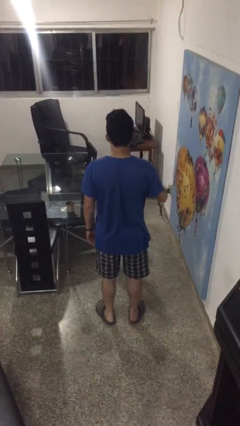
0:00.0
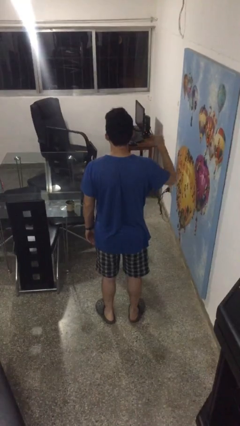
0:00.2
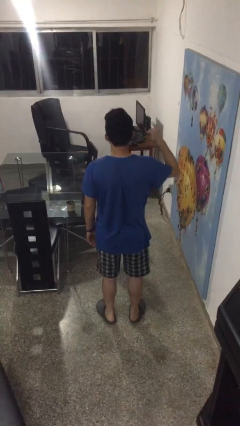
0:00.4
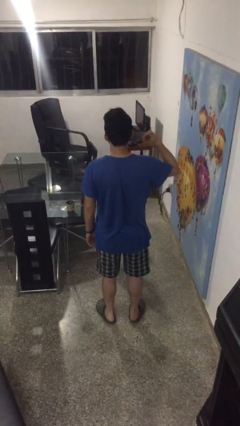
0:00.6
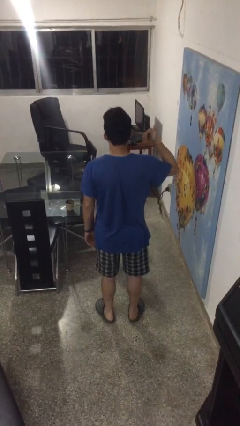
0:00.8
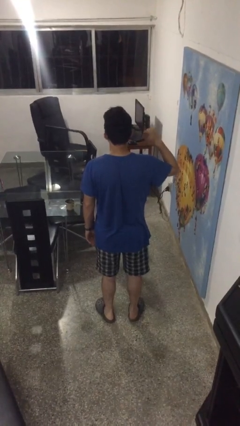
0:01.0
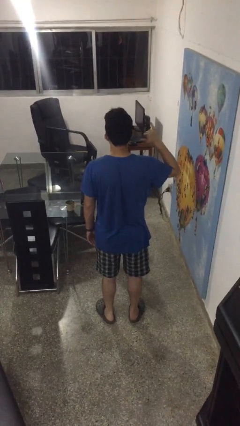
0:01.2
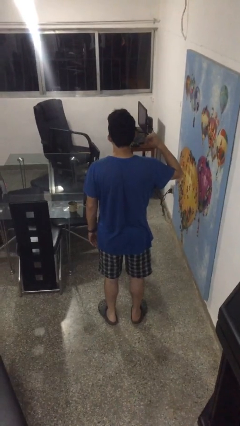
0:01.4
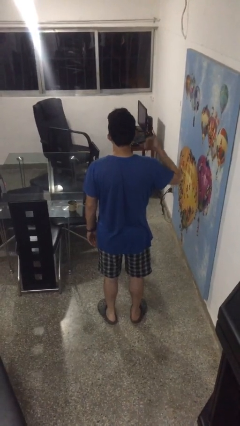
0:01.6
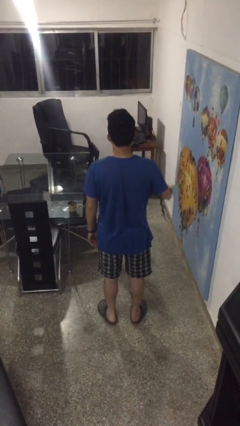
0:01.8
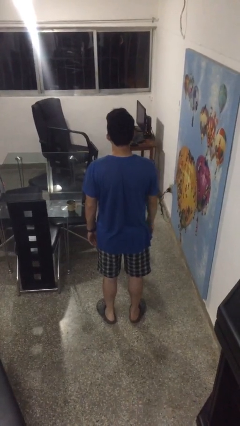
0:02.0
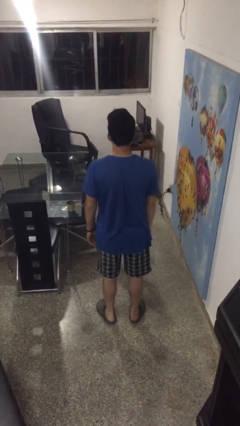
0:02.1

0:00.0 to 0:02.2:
person gestures hang loose

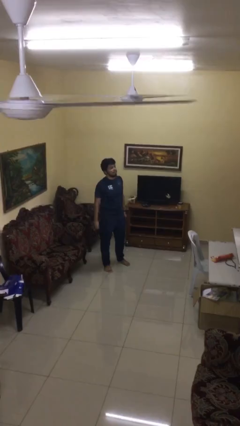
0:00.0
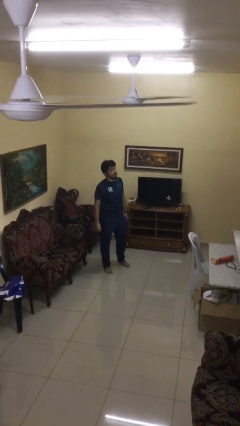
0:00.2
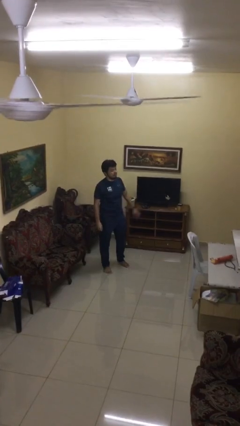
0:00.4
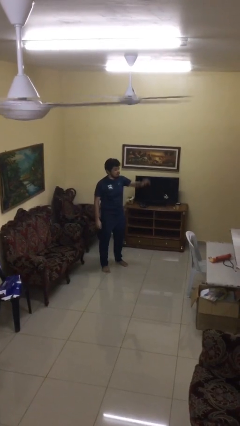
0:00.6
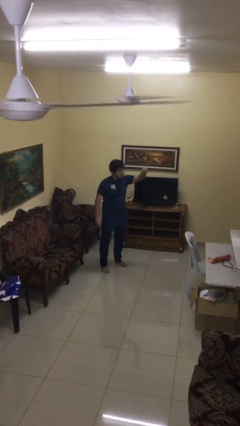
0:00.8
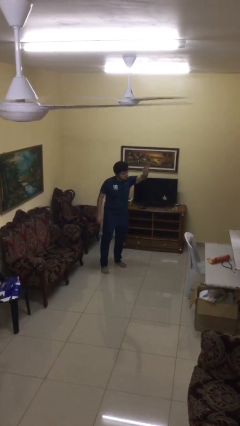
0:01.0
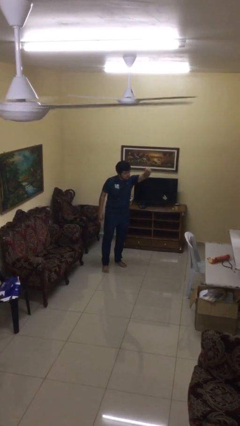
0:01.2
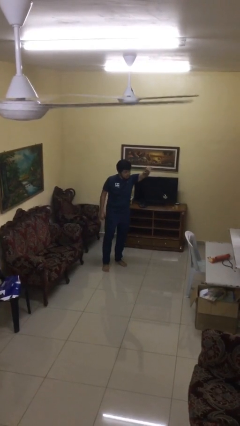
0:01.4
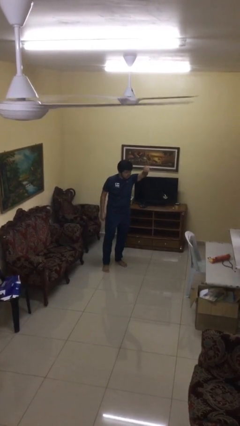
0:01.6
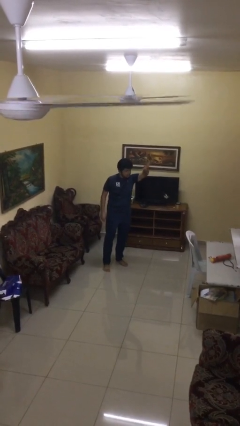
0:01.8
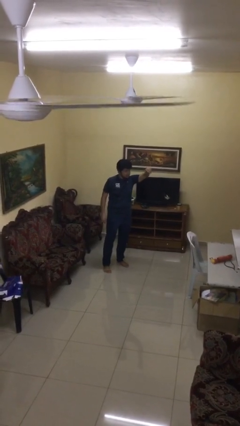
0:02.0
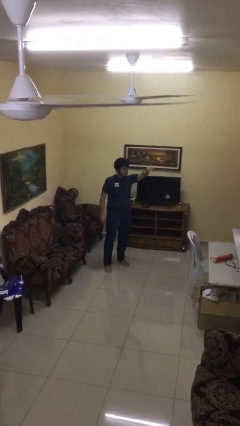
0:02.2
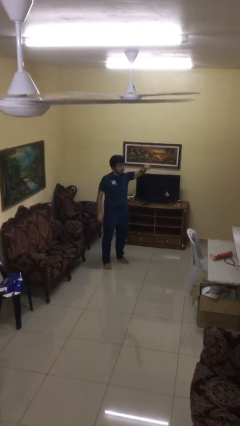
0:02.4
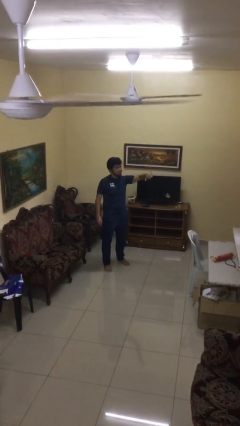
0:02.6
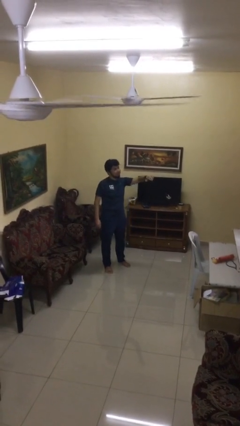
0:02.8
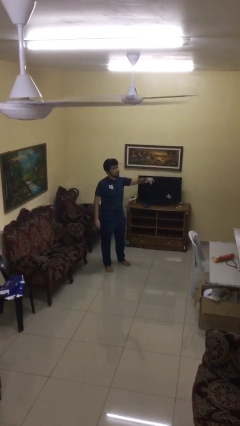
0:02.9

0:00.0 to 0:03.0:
person gestures come here

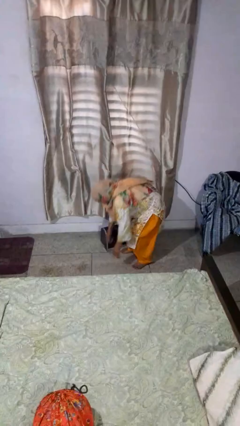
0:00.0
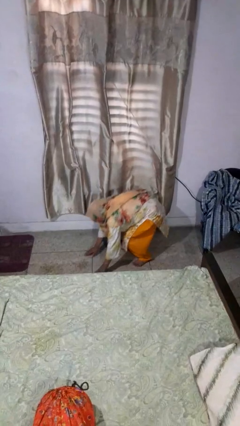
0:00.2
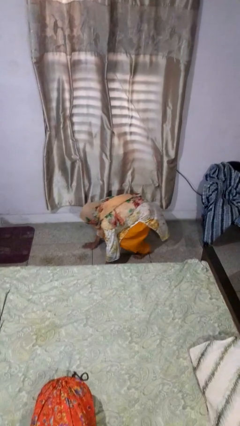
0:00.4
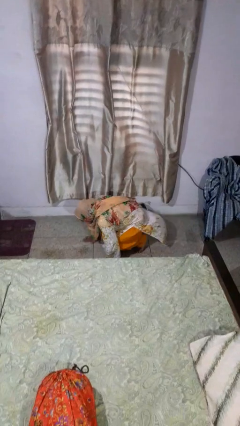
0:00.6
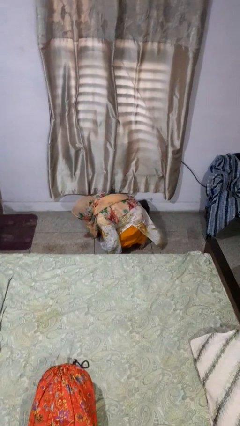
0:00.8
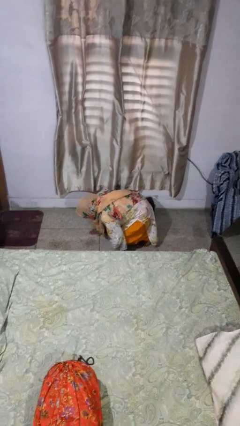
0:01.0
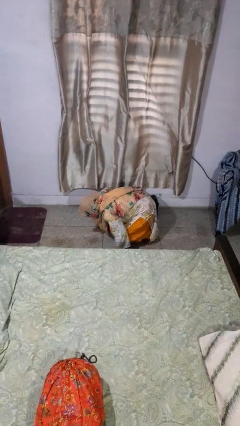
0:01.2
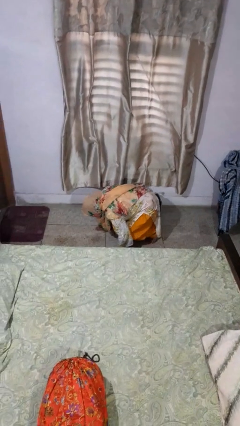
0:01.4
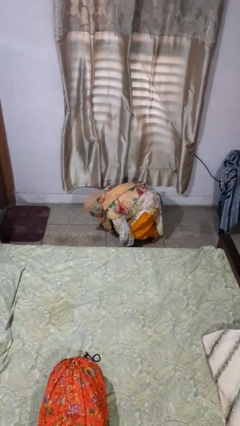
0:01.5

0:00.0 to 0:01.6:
person lies down on floor

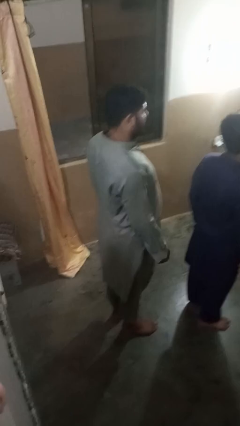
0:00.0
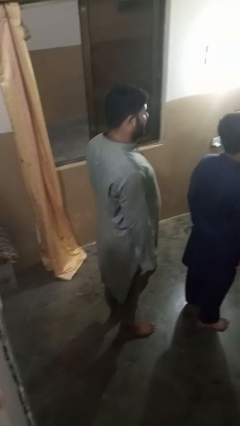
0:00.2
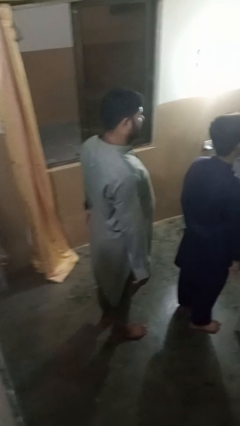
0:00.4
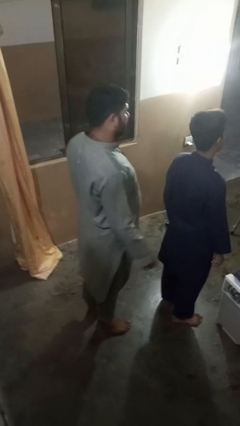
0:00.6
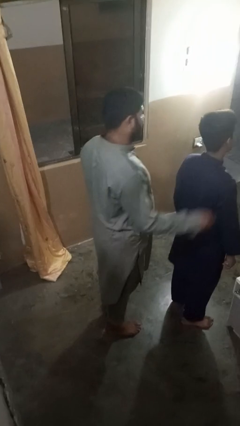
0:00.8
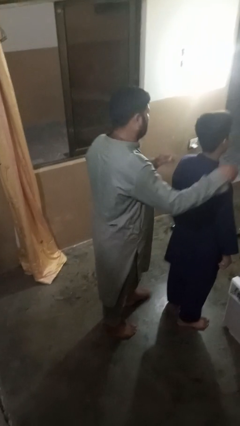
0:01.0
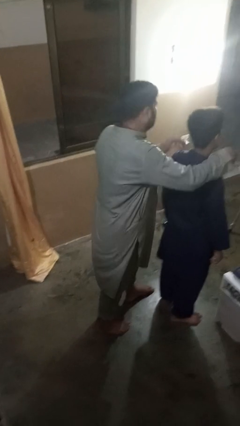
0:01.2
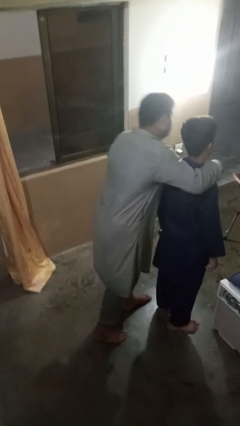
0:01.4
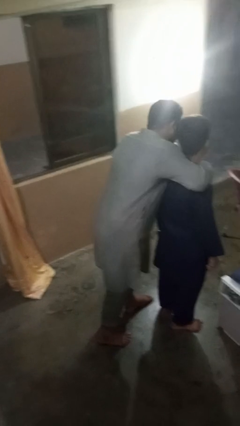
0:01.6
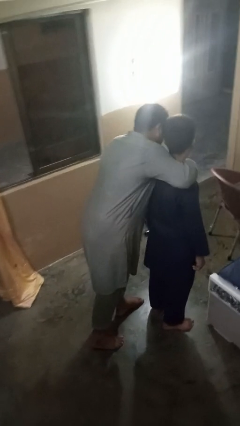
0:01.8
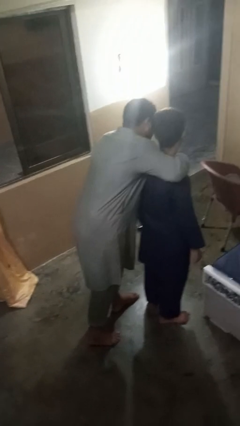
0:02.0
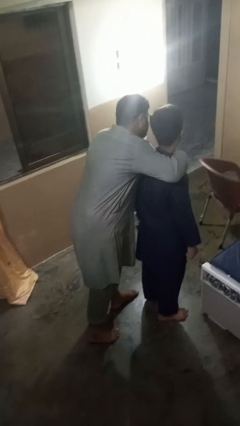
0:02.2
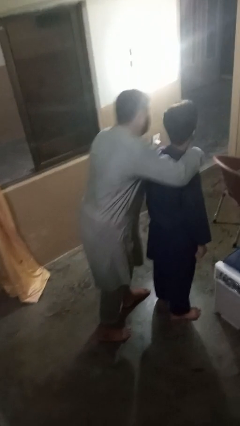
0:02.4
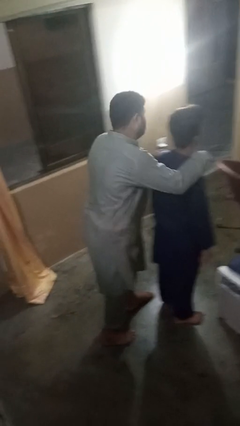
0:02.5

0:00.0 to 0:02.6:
person hugs person from behind

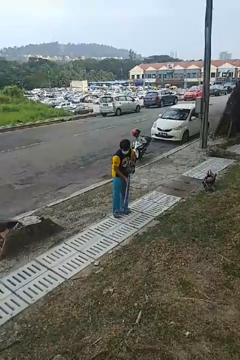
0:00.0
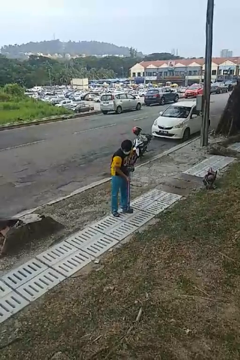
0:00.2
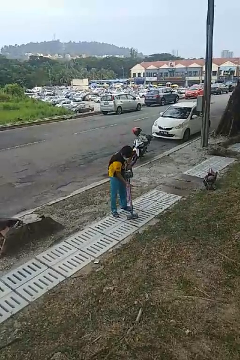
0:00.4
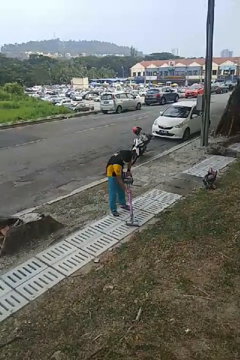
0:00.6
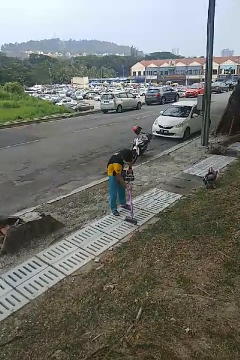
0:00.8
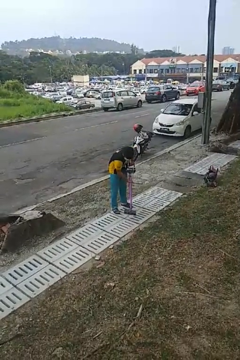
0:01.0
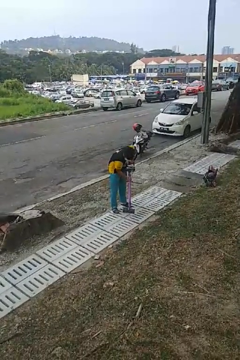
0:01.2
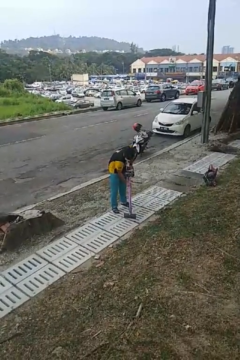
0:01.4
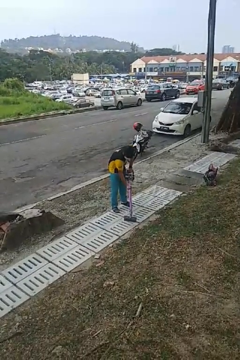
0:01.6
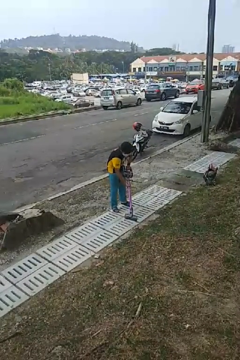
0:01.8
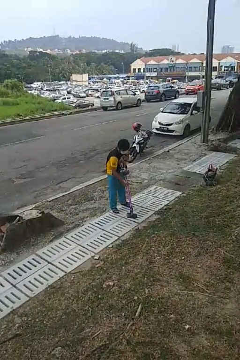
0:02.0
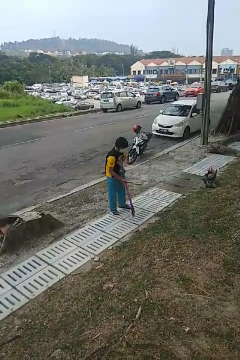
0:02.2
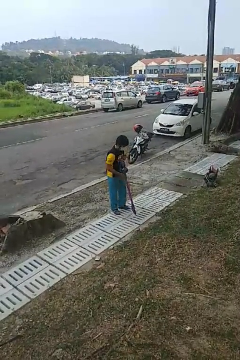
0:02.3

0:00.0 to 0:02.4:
person vacuums carpet

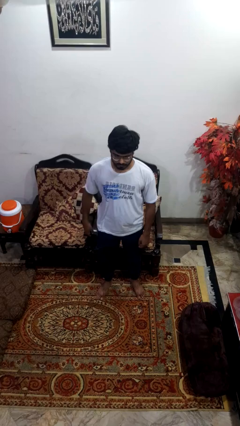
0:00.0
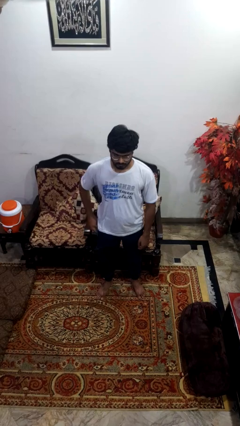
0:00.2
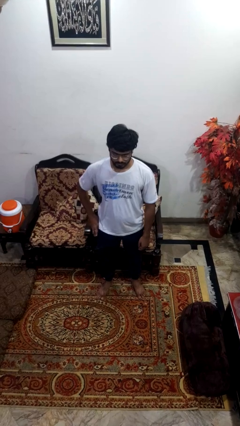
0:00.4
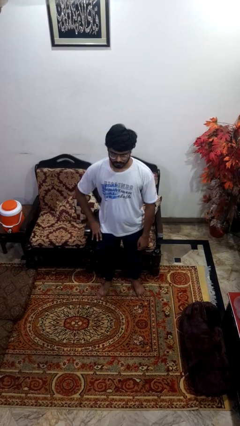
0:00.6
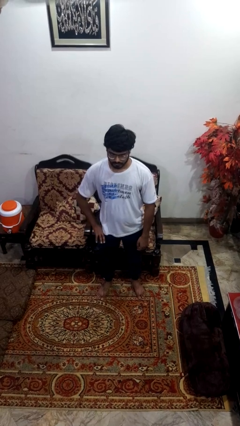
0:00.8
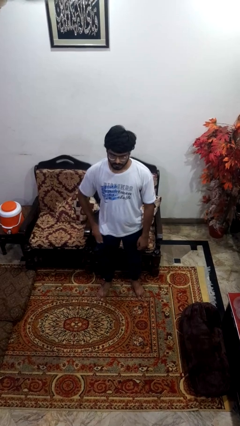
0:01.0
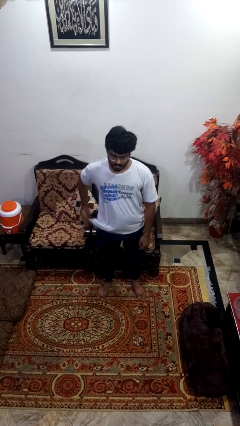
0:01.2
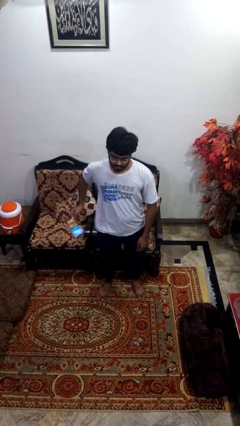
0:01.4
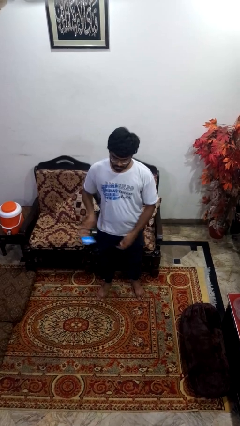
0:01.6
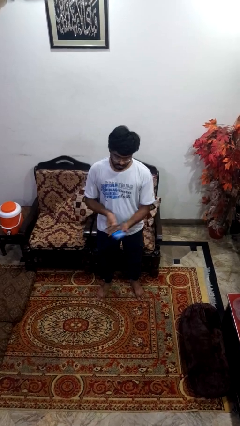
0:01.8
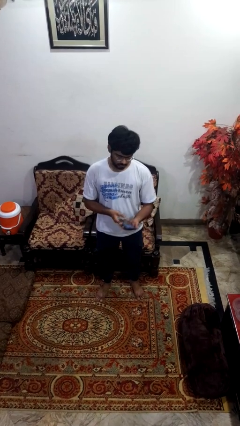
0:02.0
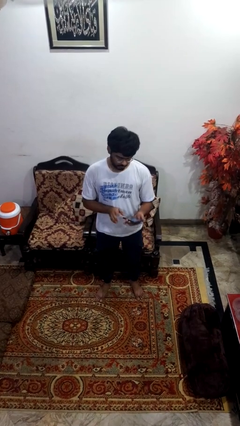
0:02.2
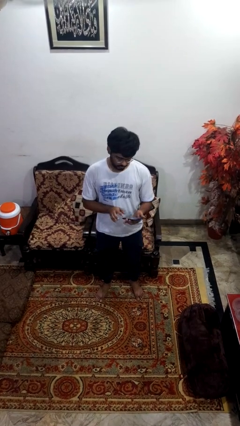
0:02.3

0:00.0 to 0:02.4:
person takes phone from pocket

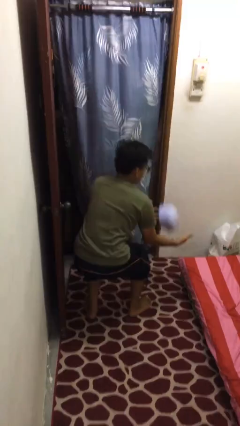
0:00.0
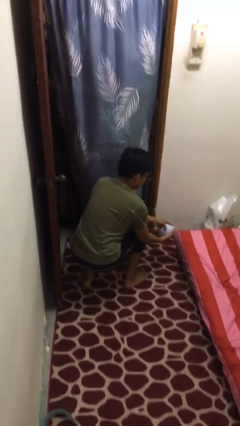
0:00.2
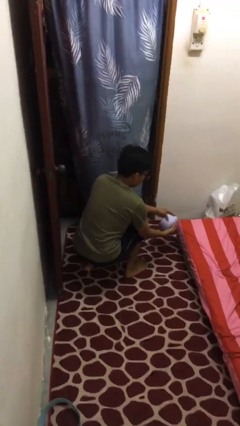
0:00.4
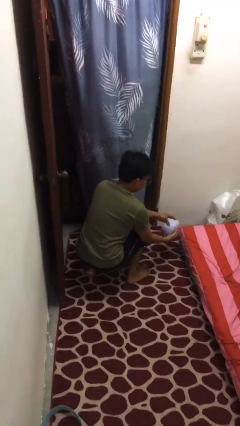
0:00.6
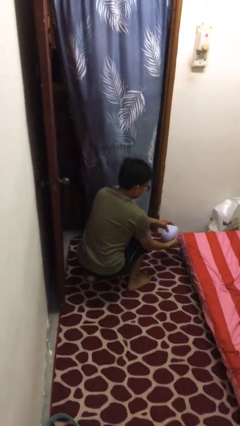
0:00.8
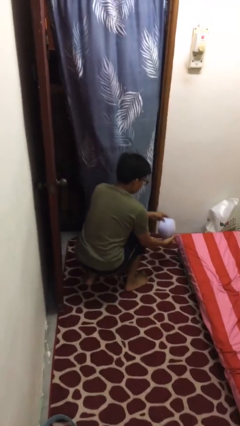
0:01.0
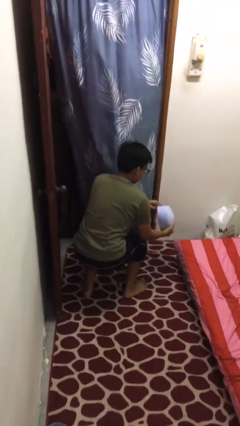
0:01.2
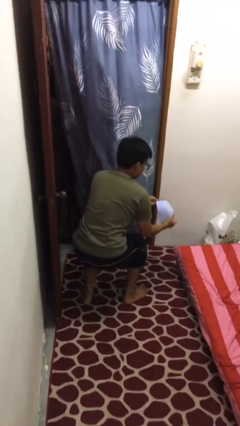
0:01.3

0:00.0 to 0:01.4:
person catches dropped object

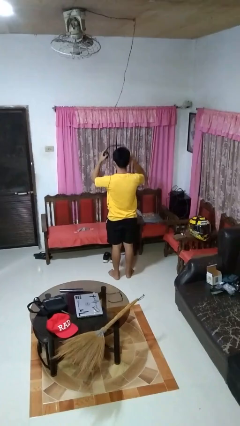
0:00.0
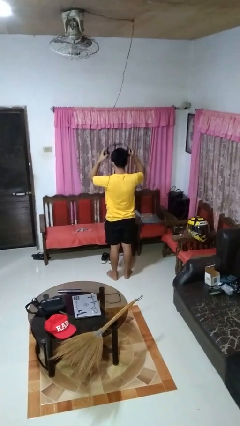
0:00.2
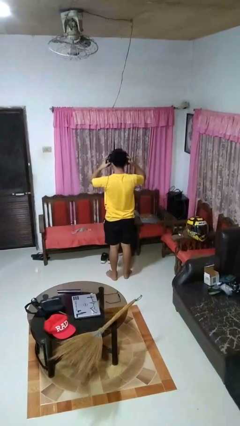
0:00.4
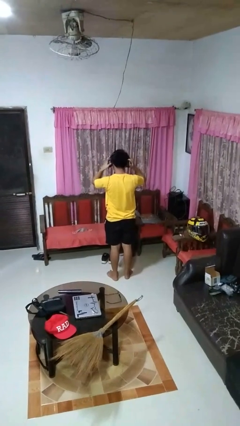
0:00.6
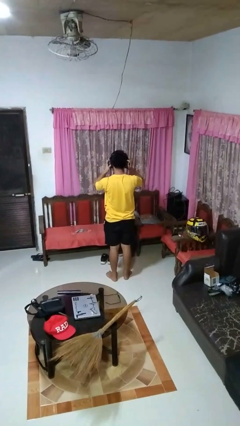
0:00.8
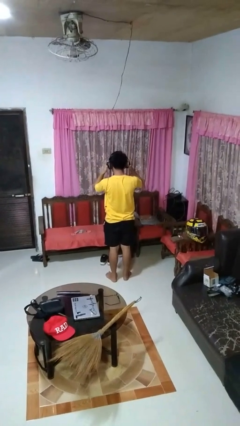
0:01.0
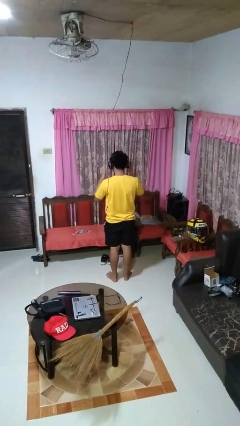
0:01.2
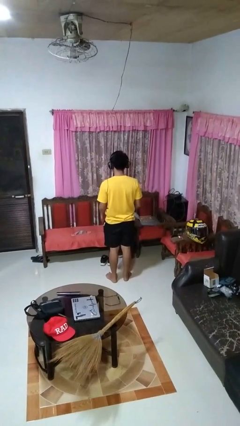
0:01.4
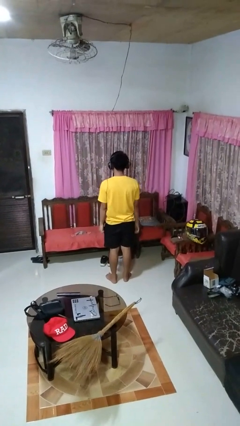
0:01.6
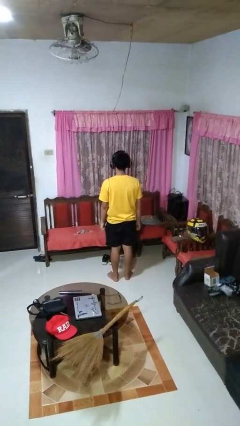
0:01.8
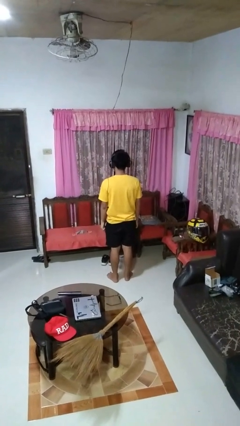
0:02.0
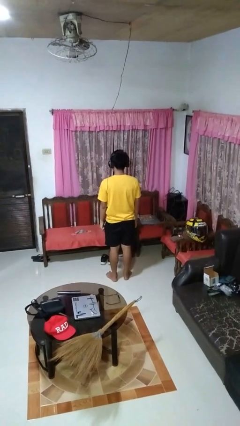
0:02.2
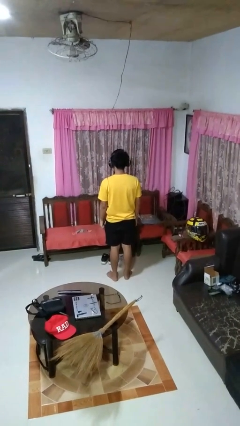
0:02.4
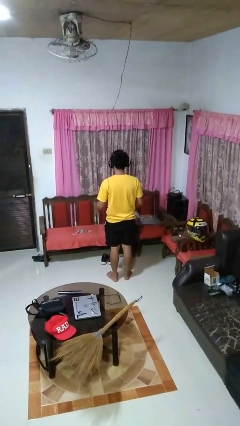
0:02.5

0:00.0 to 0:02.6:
person puts on headphones
